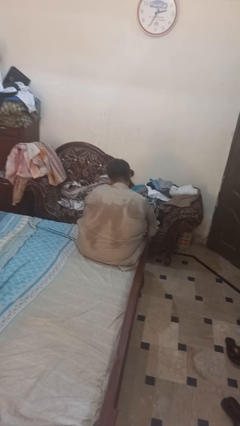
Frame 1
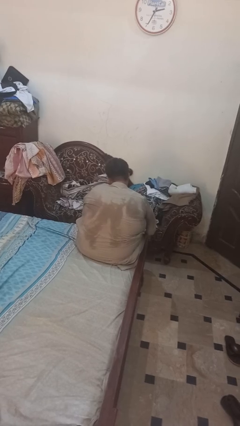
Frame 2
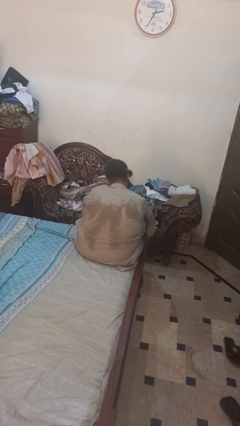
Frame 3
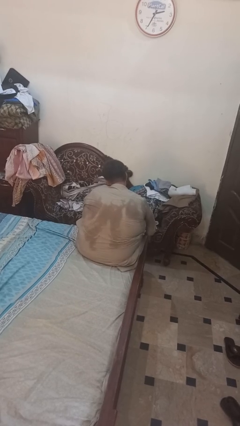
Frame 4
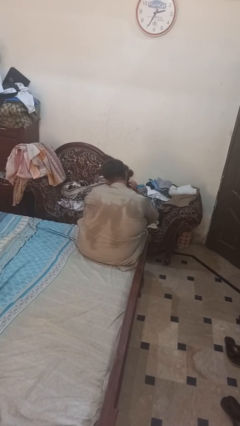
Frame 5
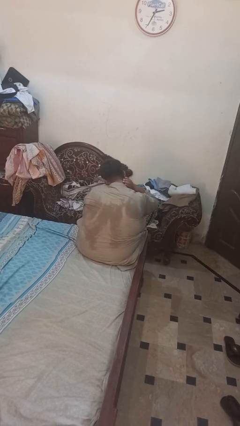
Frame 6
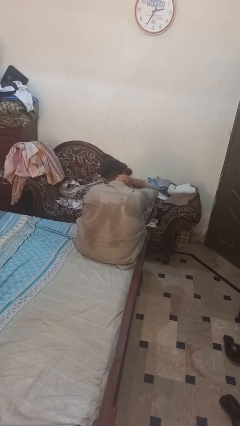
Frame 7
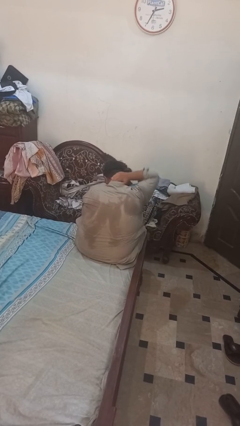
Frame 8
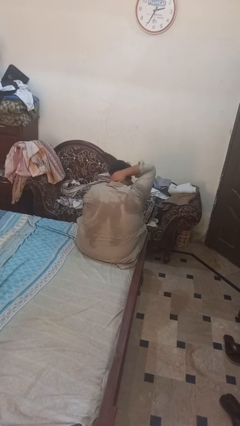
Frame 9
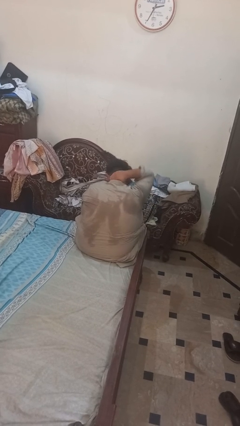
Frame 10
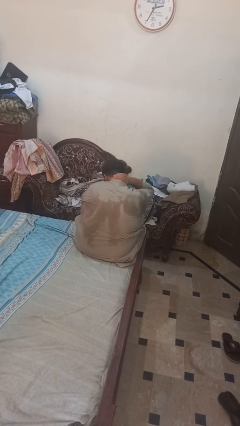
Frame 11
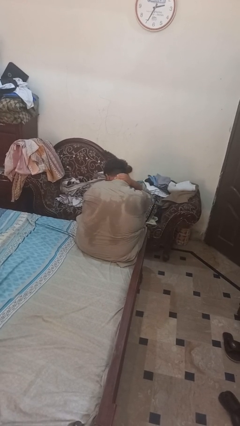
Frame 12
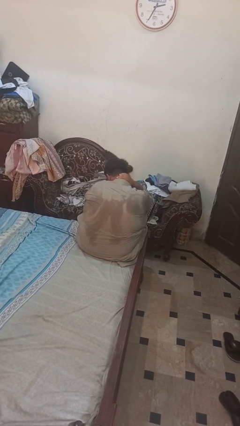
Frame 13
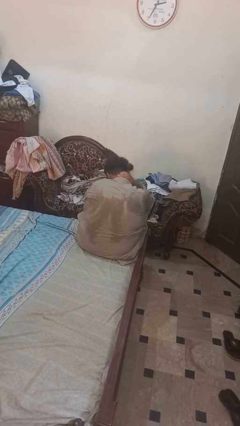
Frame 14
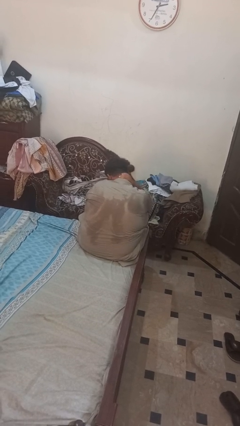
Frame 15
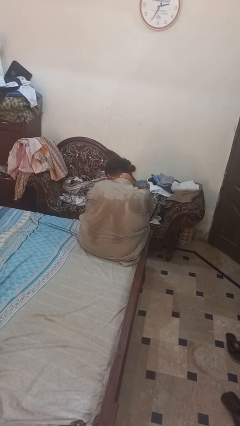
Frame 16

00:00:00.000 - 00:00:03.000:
person rubs neck

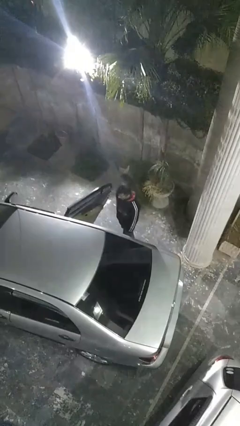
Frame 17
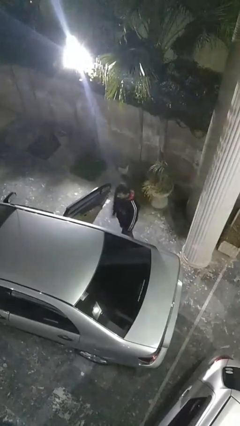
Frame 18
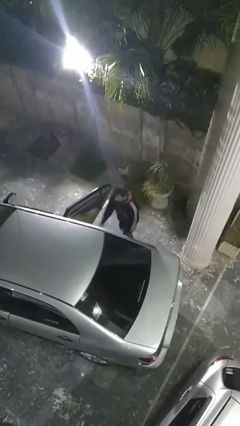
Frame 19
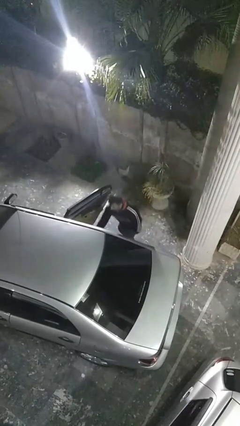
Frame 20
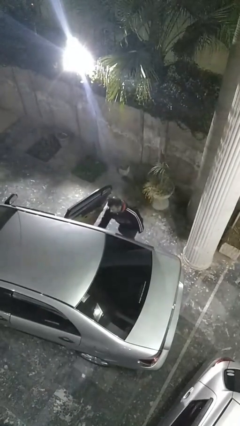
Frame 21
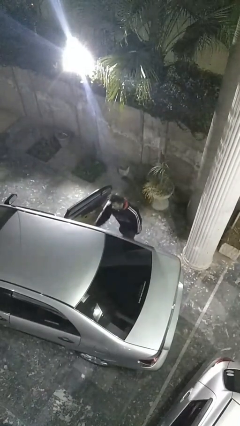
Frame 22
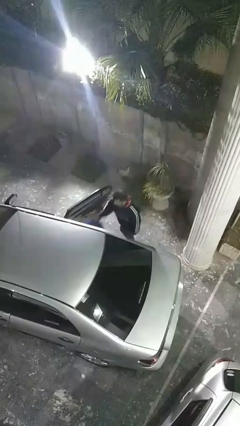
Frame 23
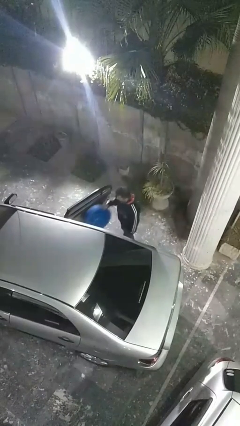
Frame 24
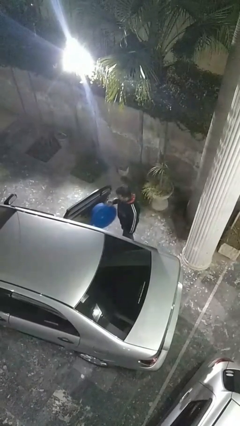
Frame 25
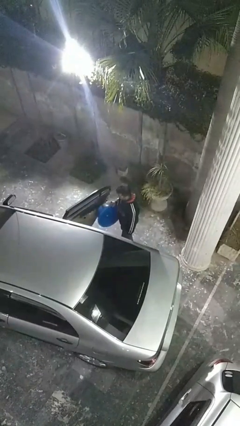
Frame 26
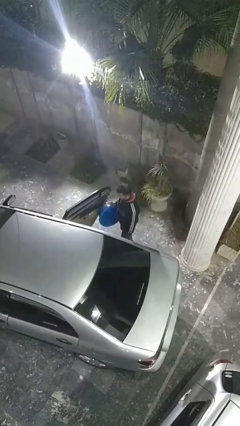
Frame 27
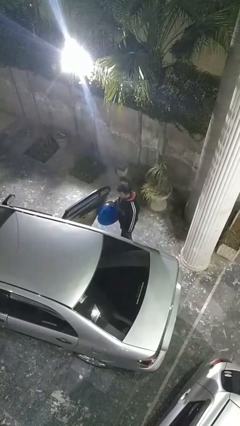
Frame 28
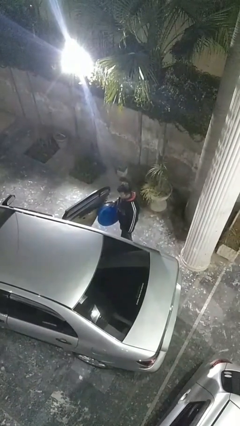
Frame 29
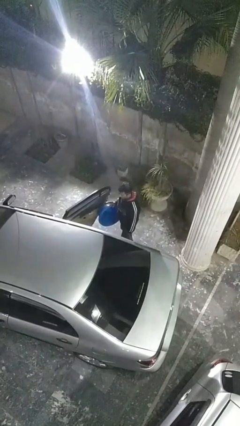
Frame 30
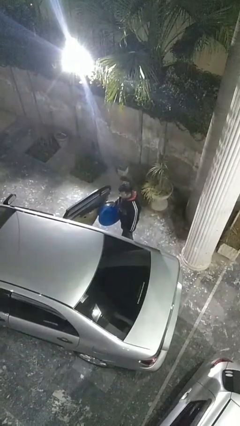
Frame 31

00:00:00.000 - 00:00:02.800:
person unloads car

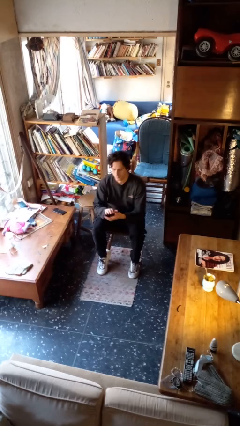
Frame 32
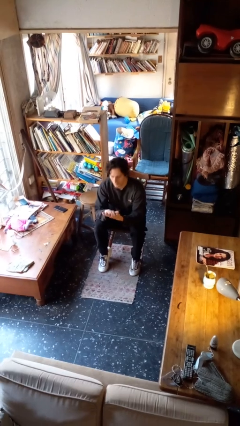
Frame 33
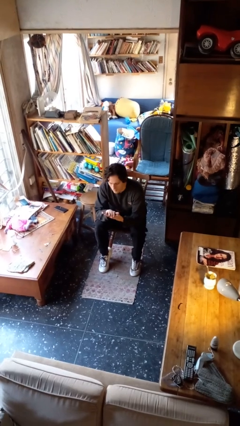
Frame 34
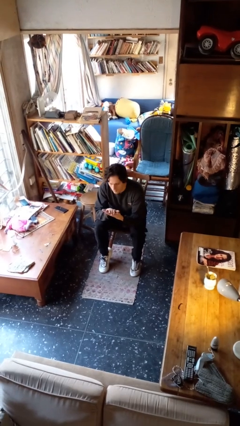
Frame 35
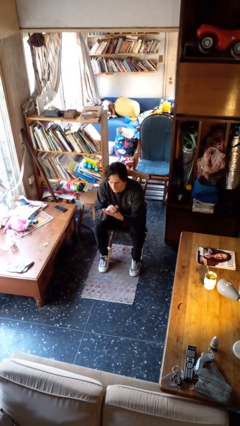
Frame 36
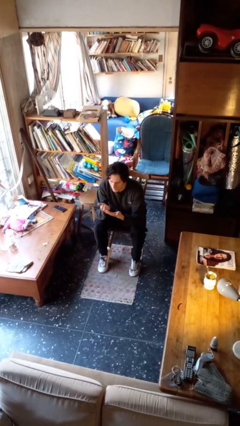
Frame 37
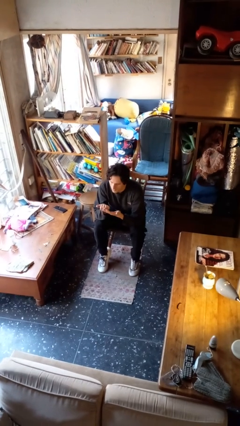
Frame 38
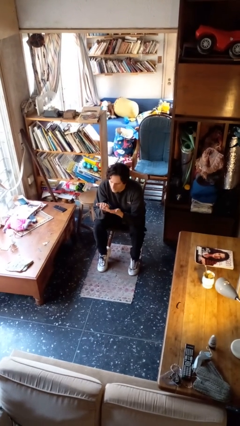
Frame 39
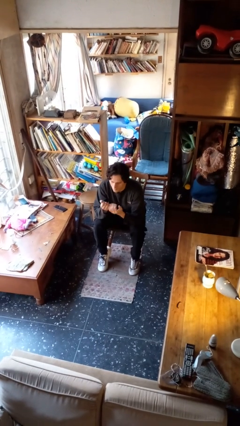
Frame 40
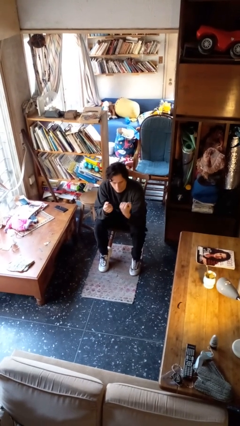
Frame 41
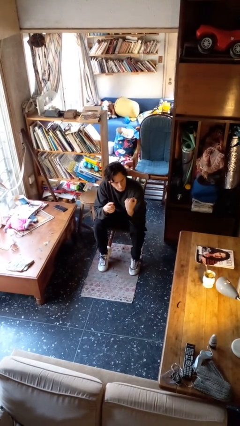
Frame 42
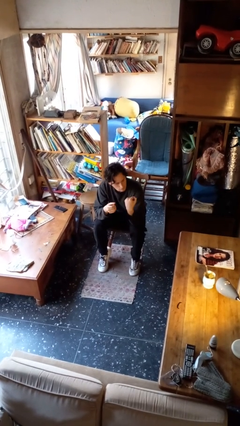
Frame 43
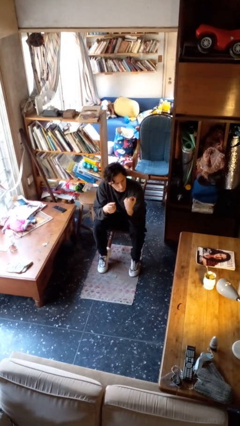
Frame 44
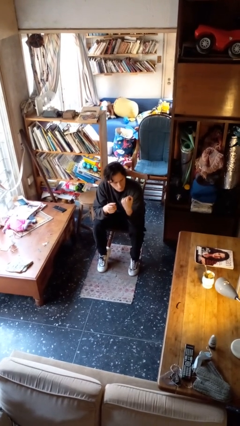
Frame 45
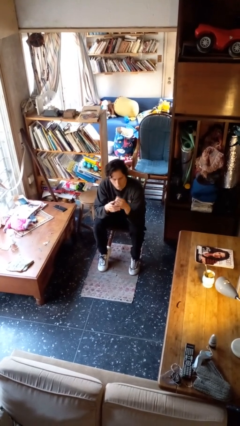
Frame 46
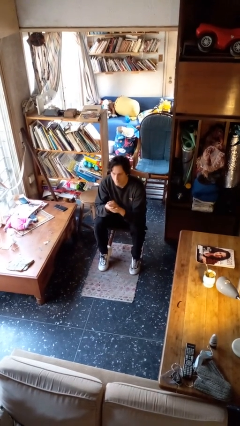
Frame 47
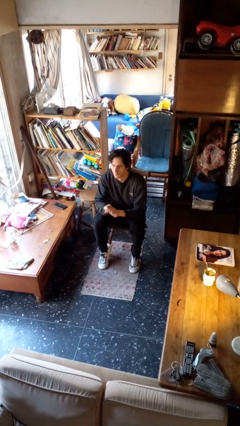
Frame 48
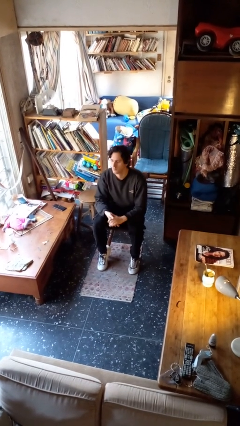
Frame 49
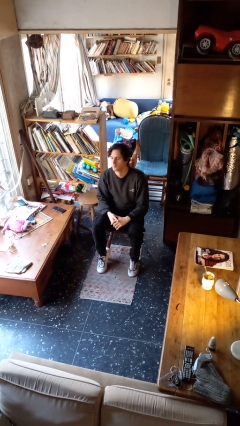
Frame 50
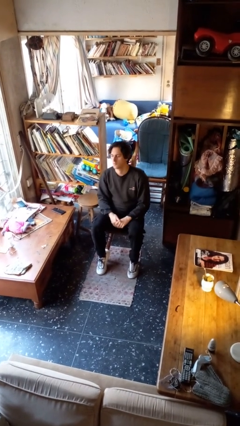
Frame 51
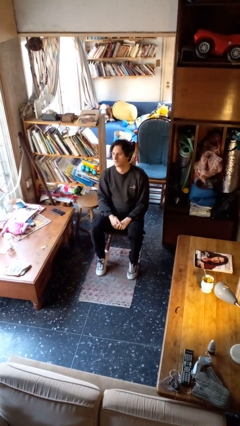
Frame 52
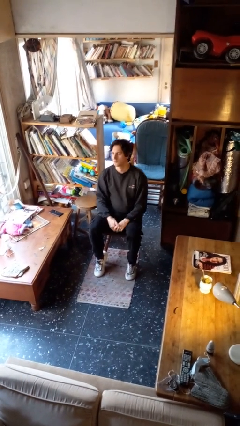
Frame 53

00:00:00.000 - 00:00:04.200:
person looks at hands in lap

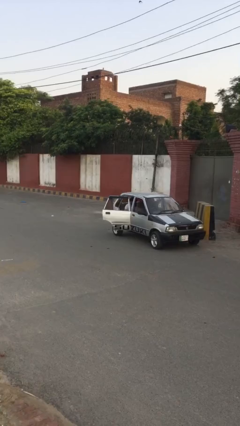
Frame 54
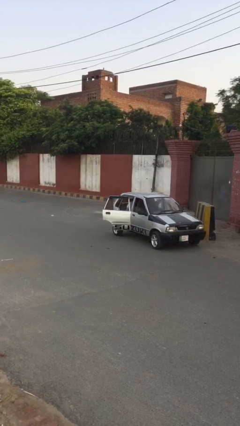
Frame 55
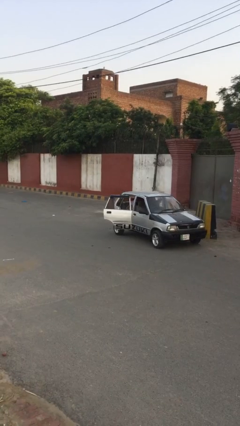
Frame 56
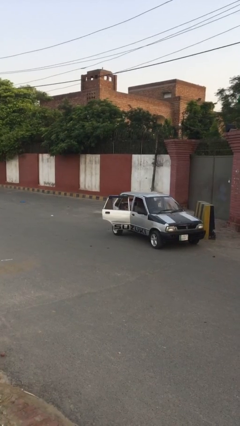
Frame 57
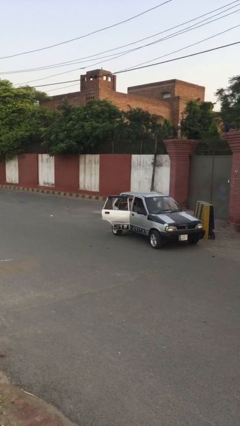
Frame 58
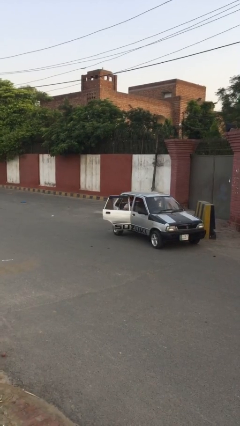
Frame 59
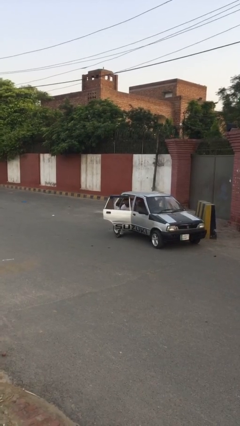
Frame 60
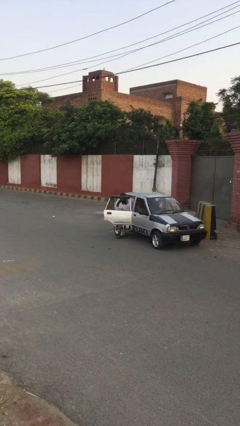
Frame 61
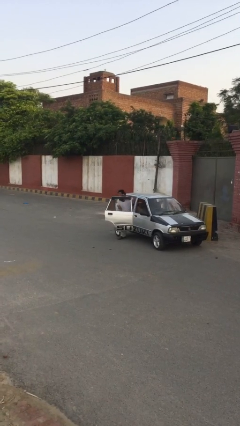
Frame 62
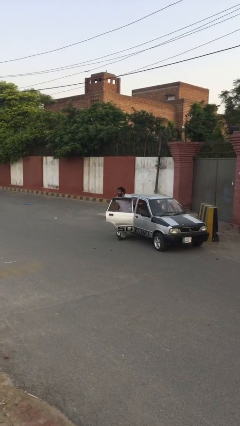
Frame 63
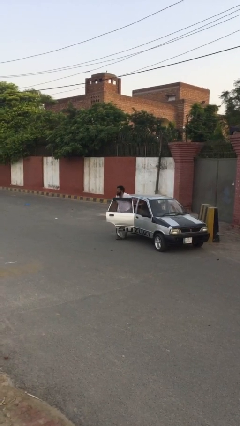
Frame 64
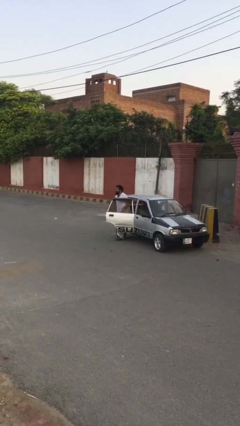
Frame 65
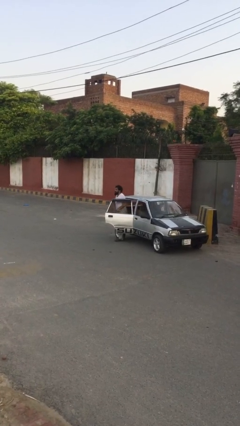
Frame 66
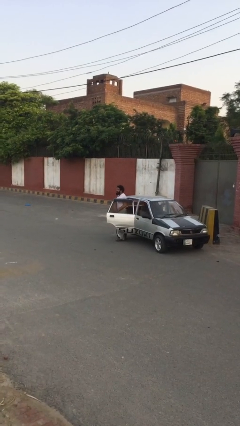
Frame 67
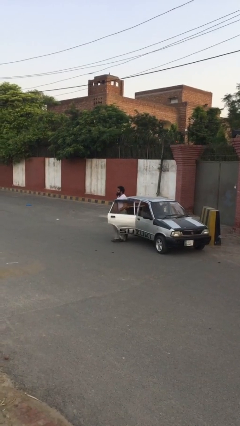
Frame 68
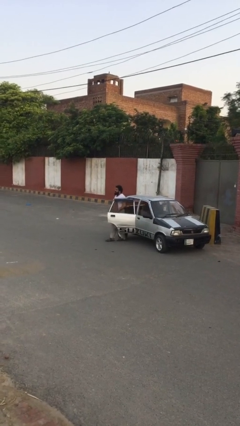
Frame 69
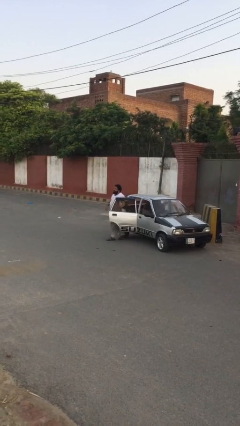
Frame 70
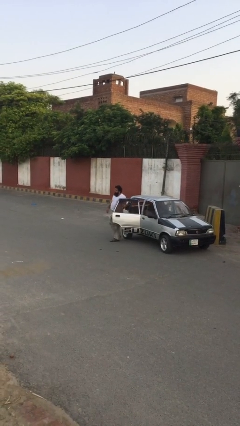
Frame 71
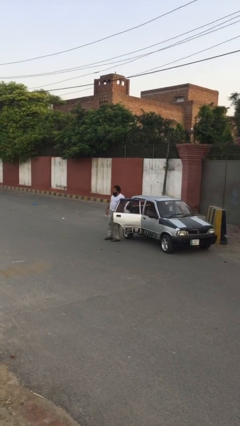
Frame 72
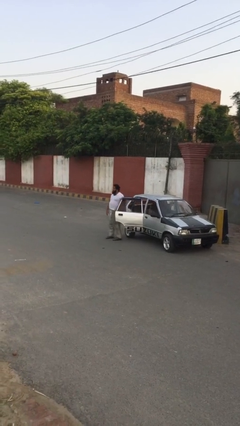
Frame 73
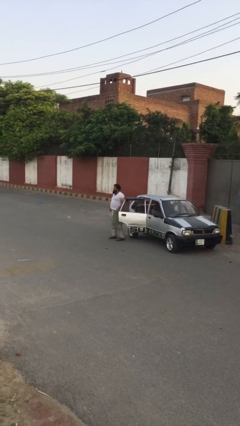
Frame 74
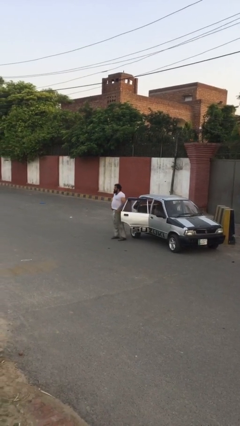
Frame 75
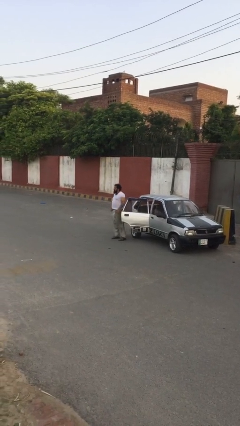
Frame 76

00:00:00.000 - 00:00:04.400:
person exits car

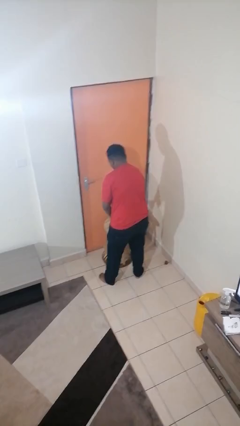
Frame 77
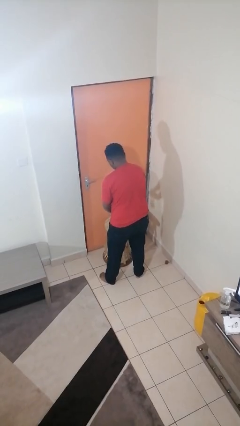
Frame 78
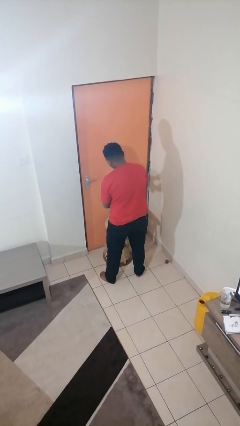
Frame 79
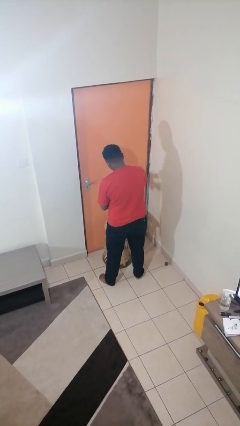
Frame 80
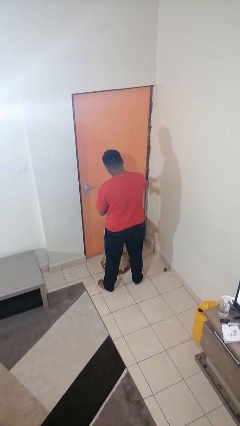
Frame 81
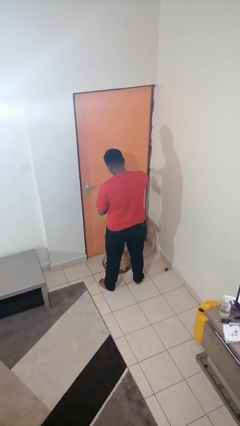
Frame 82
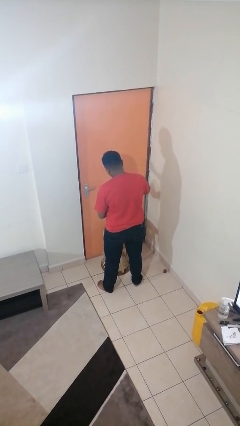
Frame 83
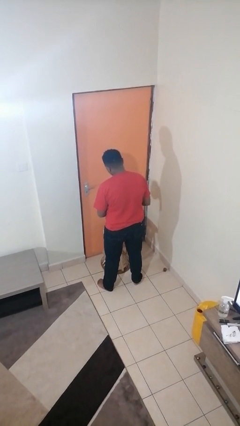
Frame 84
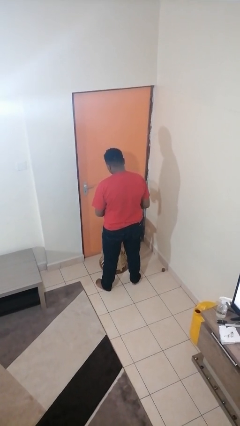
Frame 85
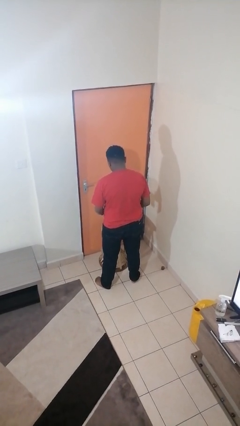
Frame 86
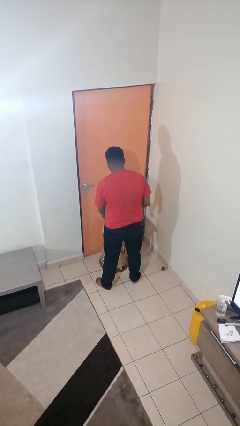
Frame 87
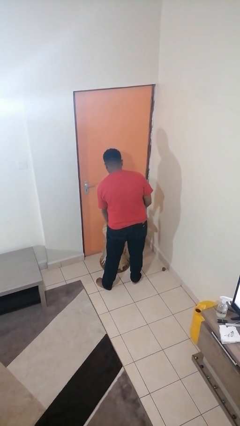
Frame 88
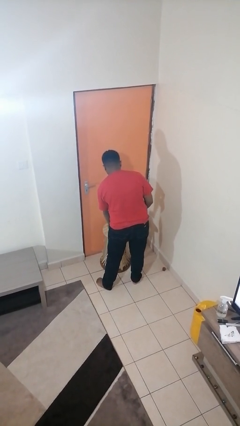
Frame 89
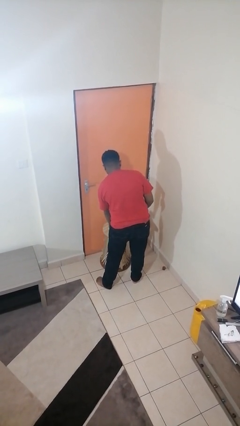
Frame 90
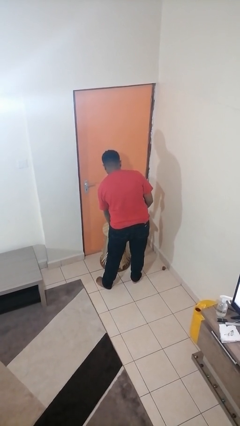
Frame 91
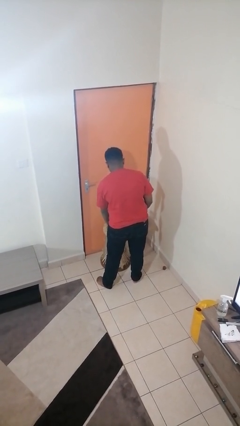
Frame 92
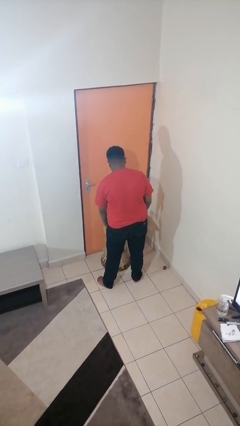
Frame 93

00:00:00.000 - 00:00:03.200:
person opens jar
